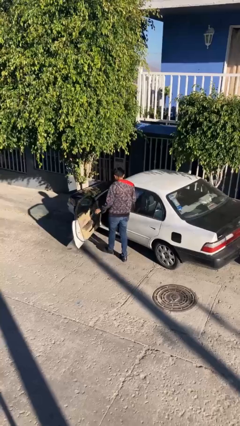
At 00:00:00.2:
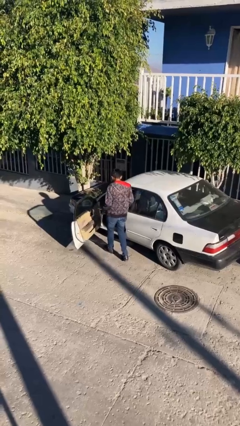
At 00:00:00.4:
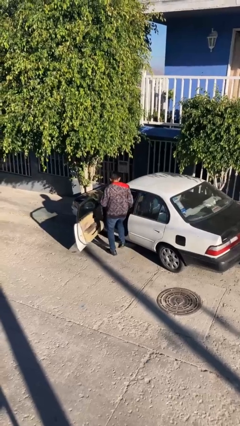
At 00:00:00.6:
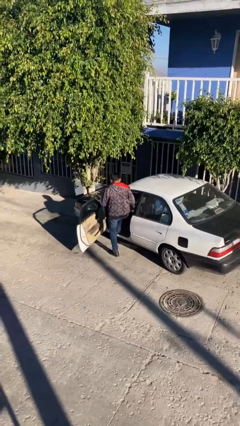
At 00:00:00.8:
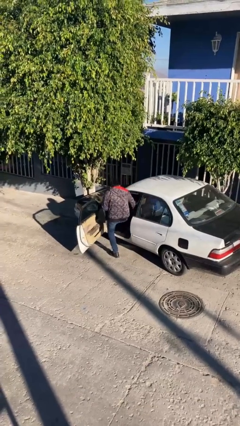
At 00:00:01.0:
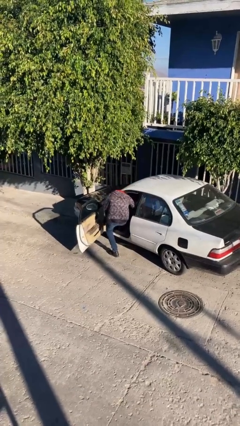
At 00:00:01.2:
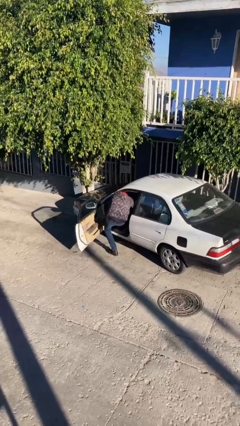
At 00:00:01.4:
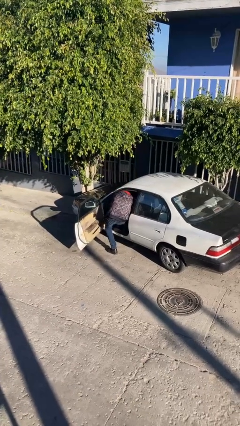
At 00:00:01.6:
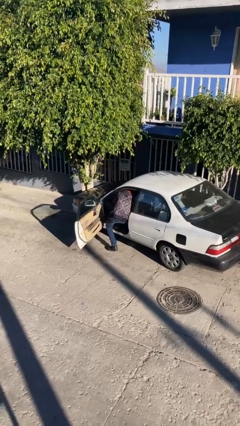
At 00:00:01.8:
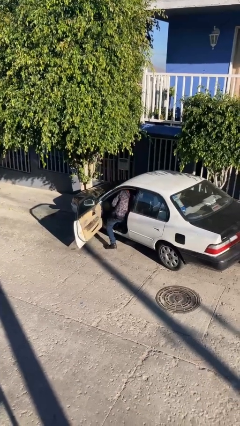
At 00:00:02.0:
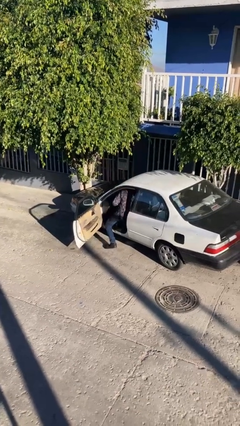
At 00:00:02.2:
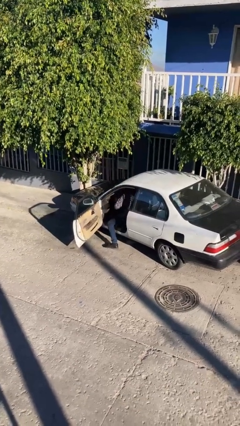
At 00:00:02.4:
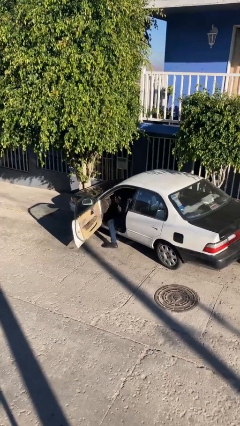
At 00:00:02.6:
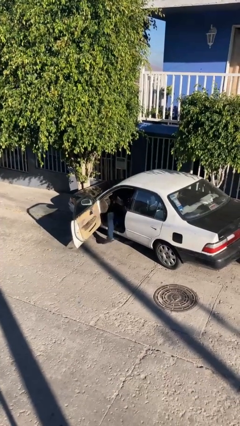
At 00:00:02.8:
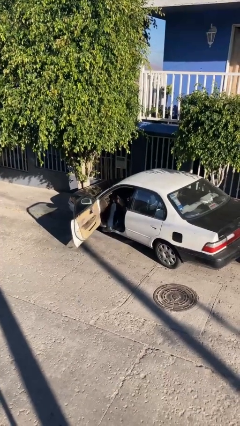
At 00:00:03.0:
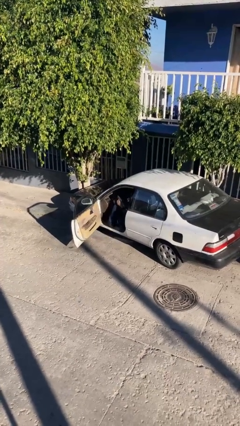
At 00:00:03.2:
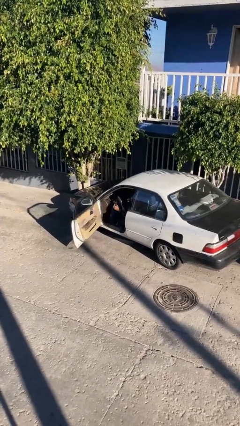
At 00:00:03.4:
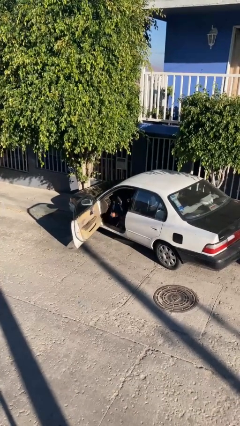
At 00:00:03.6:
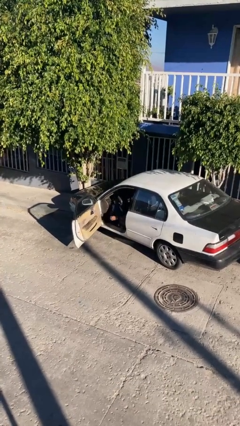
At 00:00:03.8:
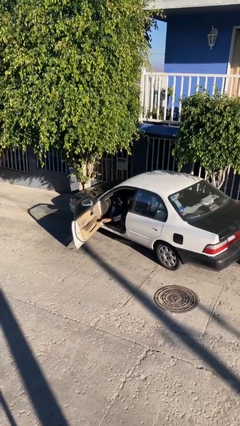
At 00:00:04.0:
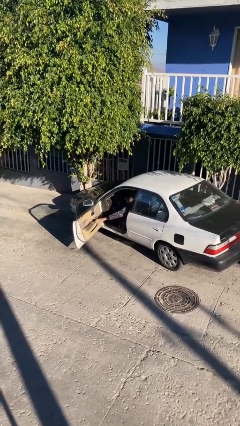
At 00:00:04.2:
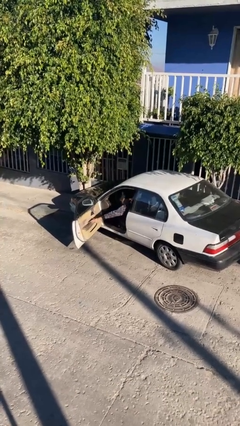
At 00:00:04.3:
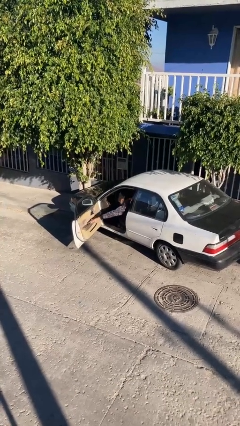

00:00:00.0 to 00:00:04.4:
person enters car

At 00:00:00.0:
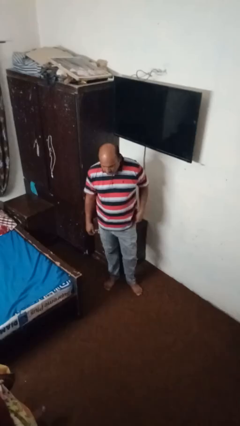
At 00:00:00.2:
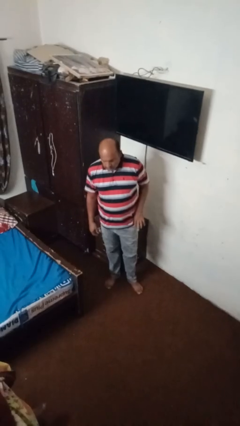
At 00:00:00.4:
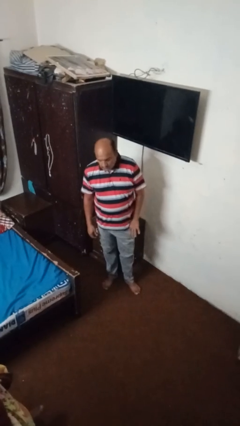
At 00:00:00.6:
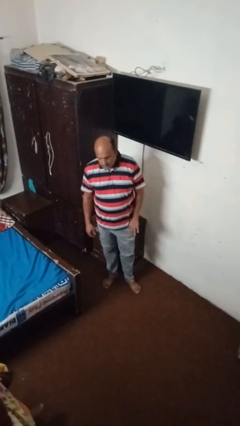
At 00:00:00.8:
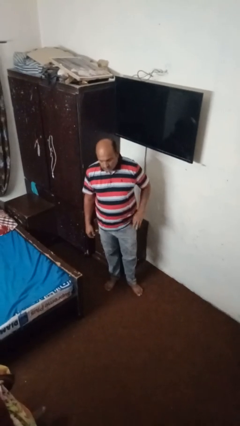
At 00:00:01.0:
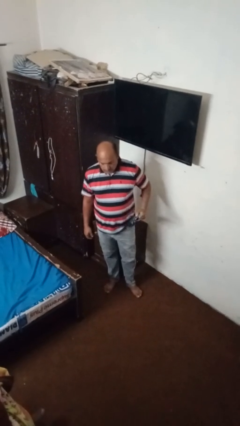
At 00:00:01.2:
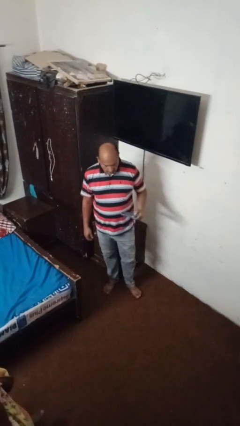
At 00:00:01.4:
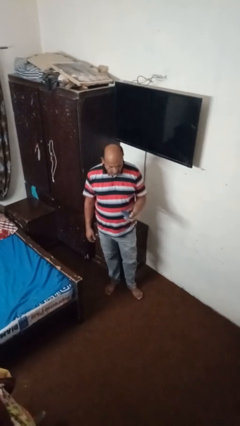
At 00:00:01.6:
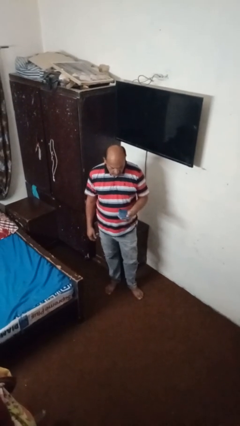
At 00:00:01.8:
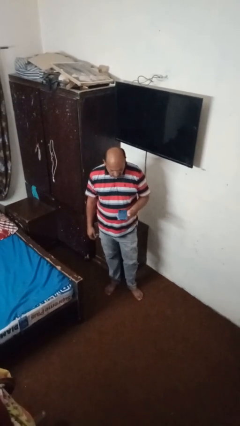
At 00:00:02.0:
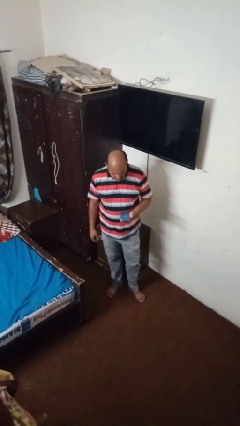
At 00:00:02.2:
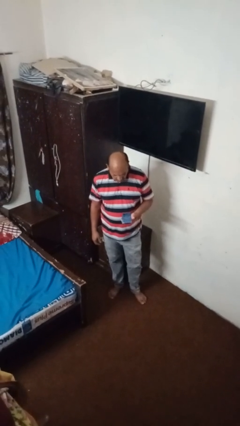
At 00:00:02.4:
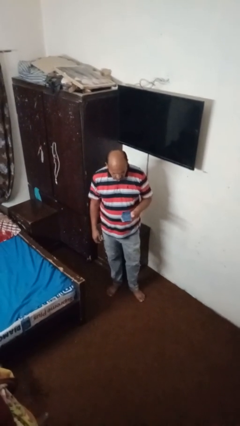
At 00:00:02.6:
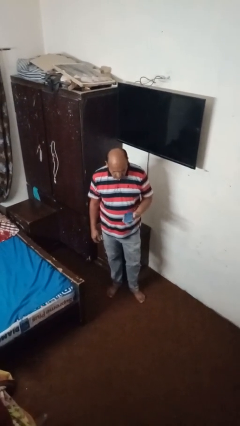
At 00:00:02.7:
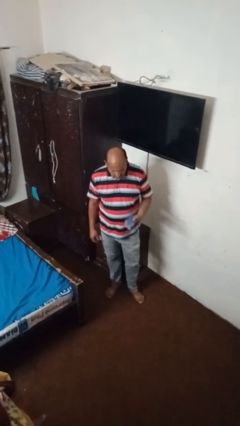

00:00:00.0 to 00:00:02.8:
person takes phone from pocket

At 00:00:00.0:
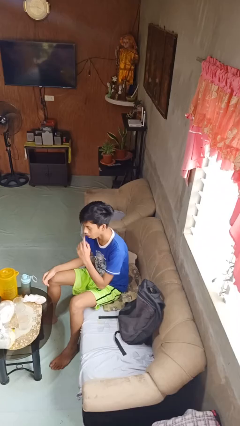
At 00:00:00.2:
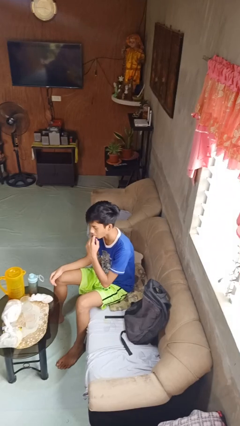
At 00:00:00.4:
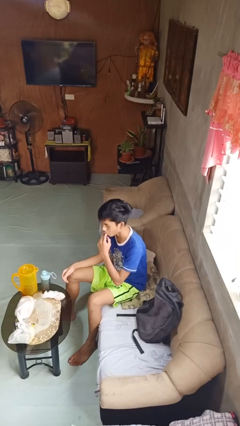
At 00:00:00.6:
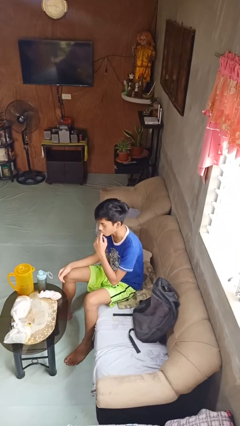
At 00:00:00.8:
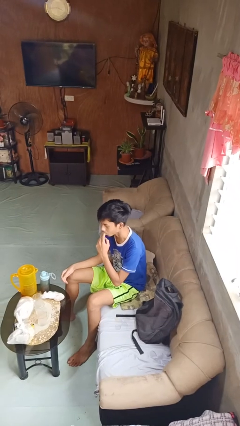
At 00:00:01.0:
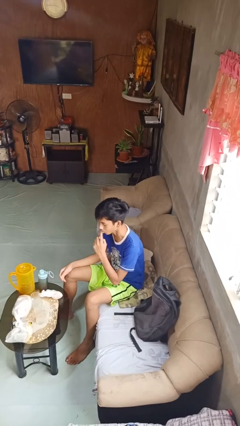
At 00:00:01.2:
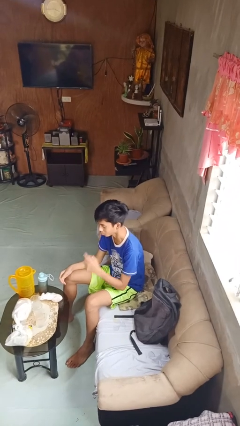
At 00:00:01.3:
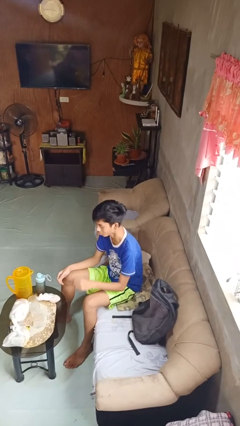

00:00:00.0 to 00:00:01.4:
person licks fingers

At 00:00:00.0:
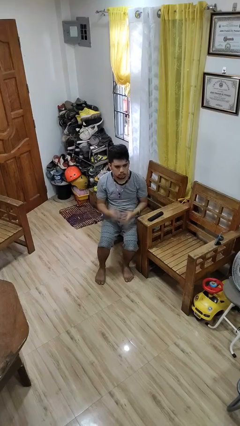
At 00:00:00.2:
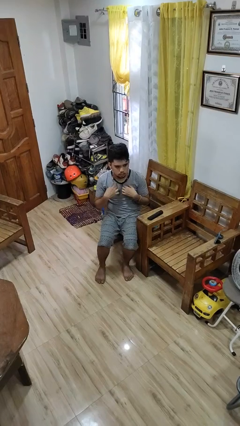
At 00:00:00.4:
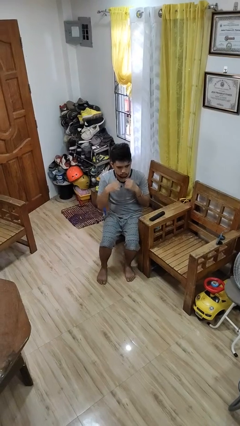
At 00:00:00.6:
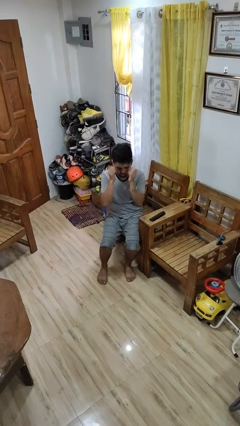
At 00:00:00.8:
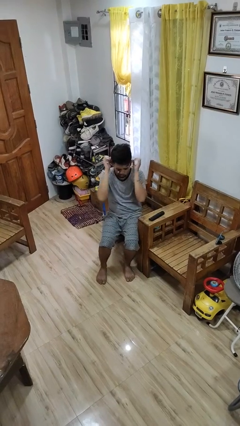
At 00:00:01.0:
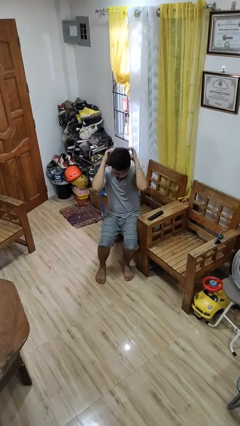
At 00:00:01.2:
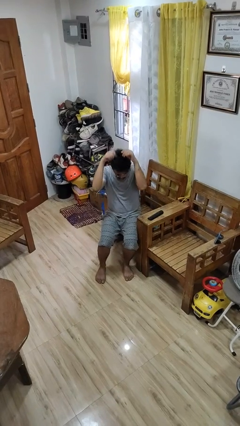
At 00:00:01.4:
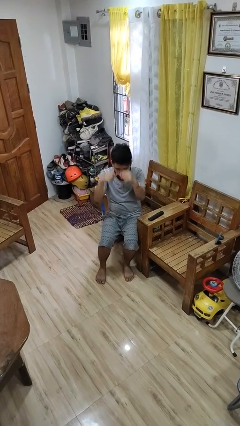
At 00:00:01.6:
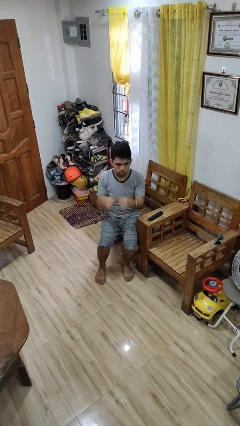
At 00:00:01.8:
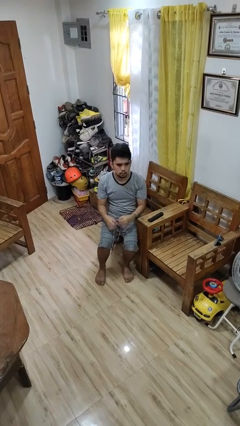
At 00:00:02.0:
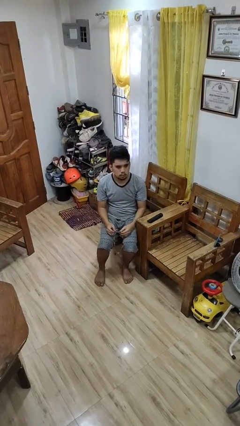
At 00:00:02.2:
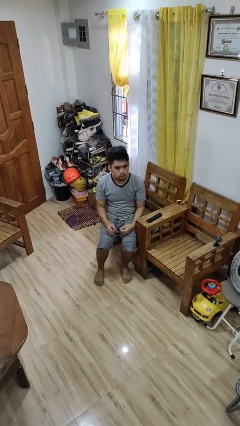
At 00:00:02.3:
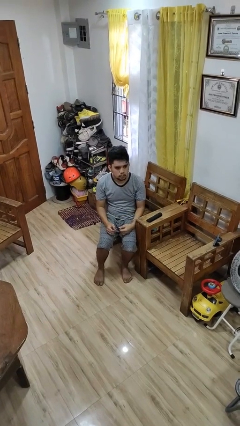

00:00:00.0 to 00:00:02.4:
person takes off necklace

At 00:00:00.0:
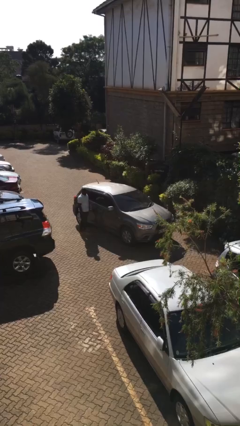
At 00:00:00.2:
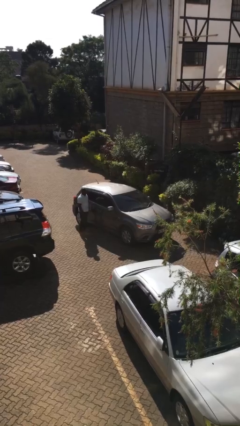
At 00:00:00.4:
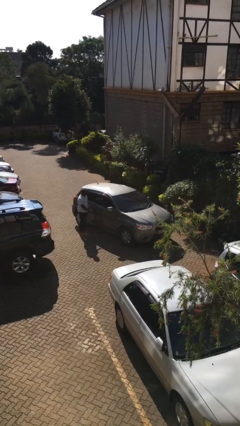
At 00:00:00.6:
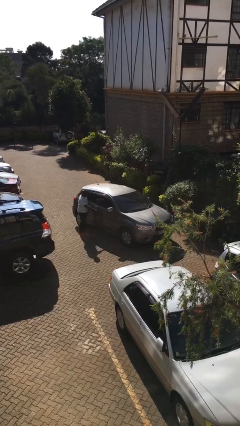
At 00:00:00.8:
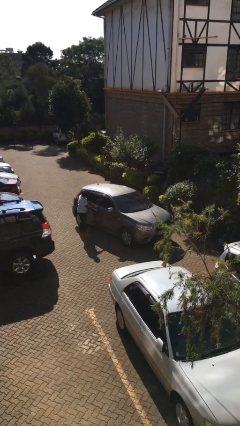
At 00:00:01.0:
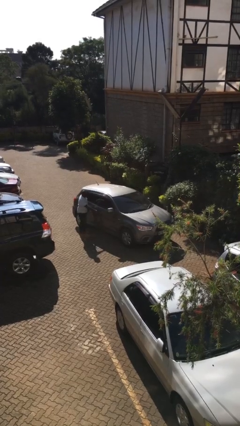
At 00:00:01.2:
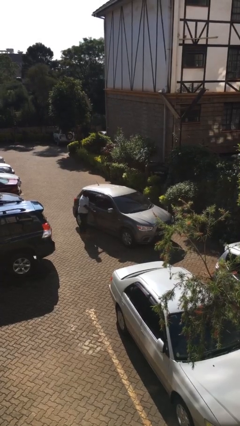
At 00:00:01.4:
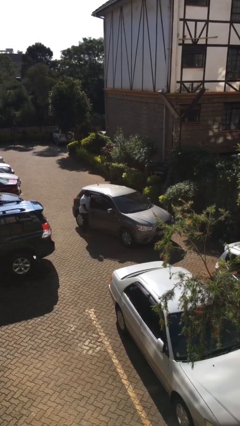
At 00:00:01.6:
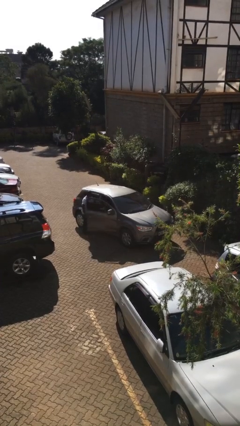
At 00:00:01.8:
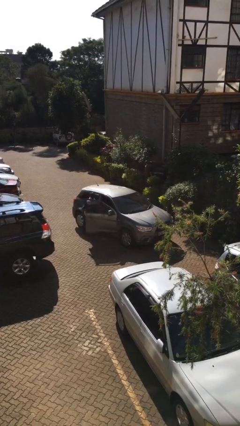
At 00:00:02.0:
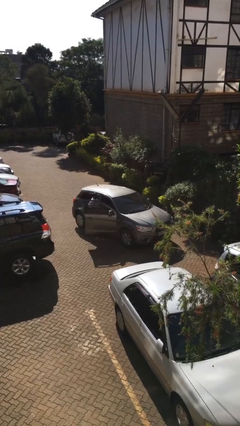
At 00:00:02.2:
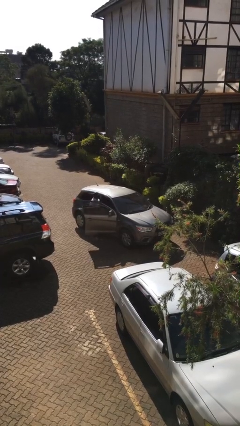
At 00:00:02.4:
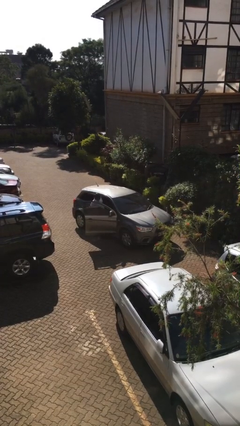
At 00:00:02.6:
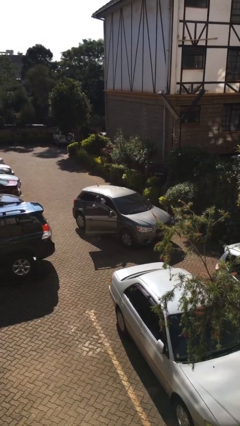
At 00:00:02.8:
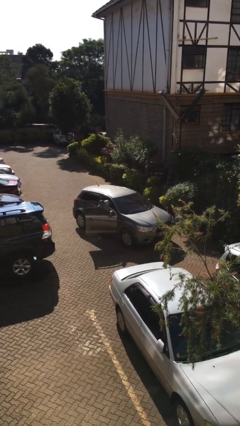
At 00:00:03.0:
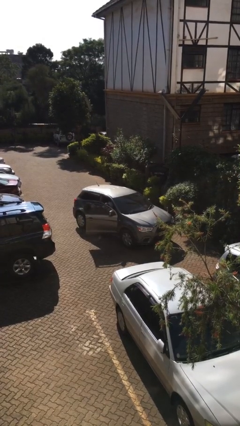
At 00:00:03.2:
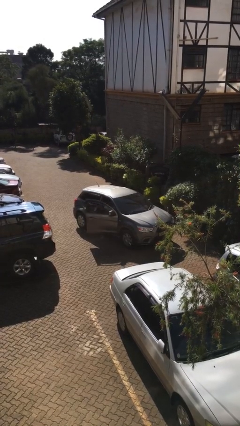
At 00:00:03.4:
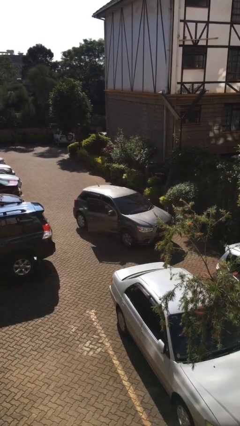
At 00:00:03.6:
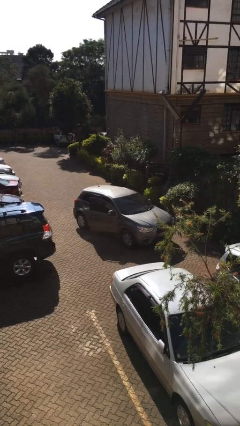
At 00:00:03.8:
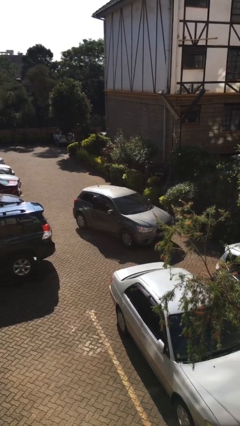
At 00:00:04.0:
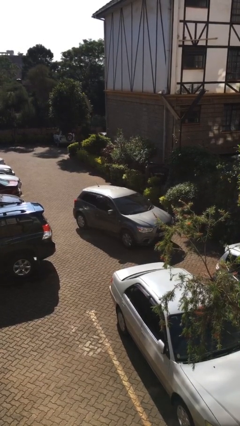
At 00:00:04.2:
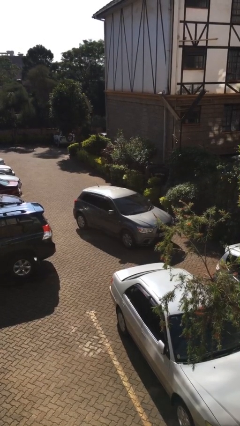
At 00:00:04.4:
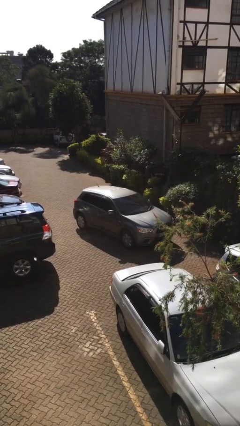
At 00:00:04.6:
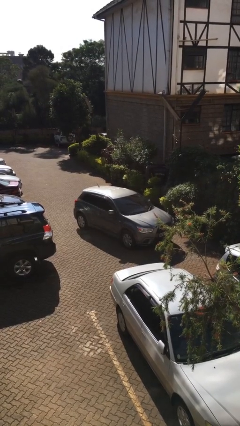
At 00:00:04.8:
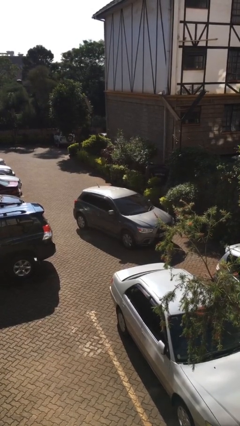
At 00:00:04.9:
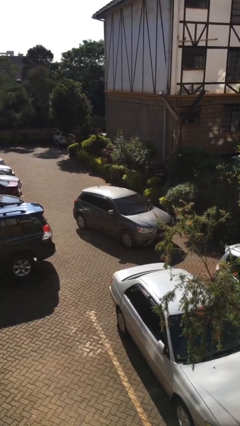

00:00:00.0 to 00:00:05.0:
car picks up person

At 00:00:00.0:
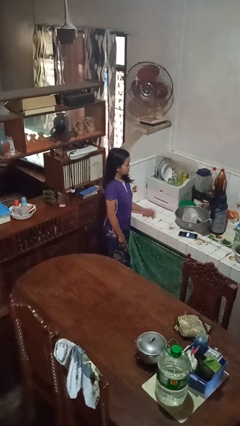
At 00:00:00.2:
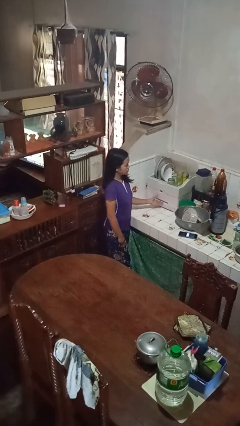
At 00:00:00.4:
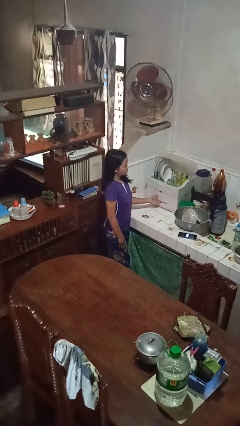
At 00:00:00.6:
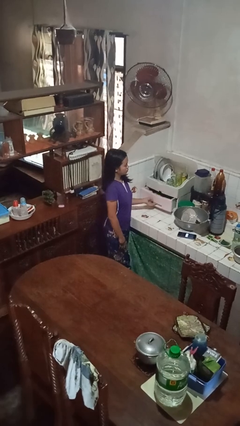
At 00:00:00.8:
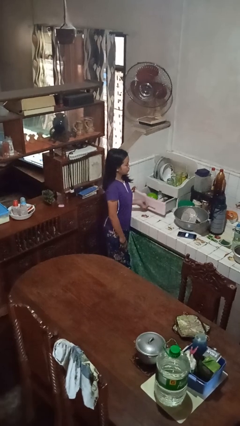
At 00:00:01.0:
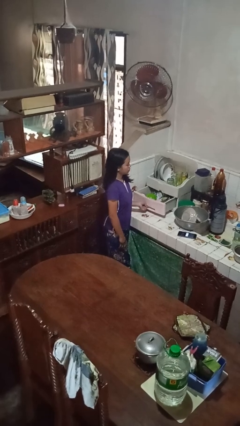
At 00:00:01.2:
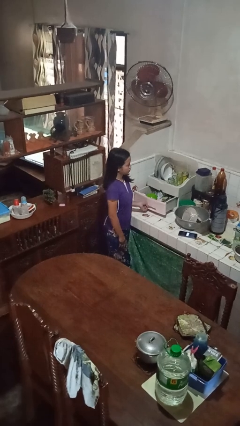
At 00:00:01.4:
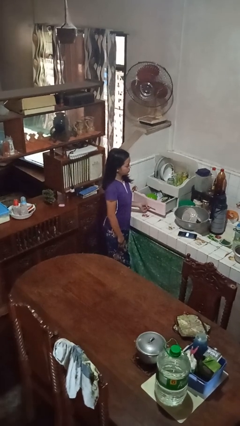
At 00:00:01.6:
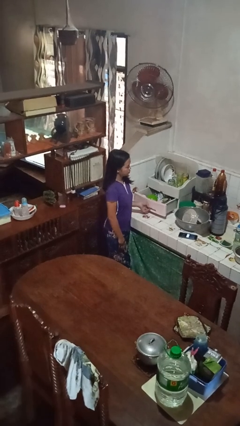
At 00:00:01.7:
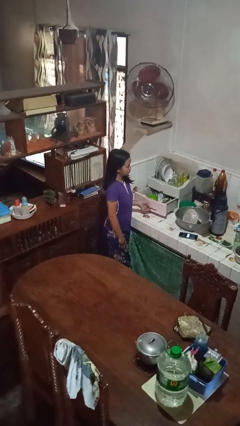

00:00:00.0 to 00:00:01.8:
person opens kitchen drawer
